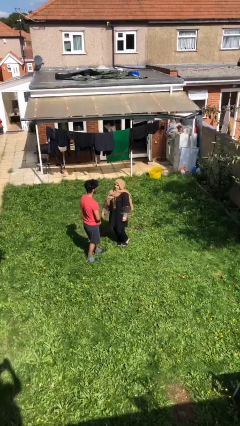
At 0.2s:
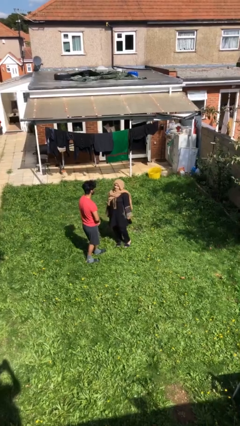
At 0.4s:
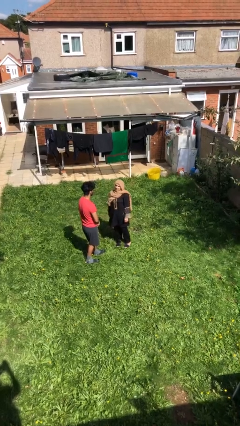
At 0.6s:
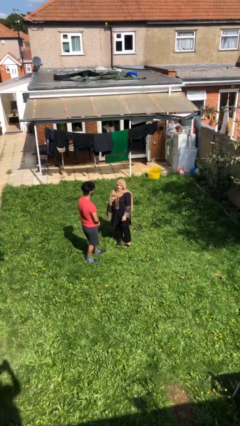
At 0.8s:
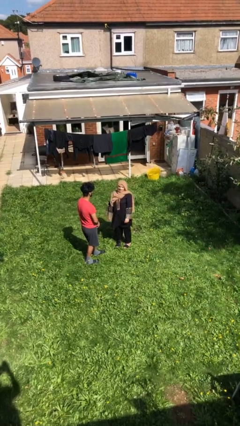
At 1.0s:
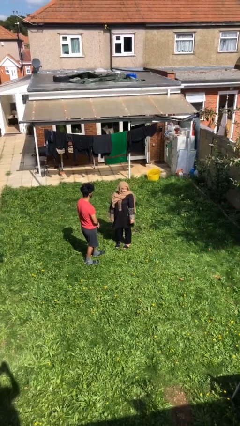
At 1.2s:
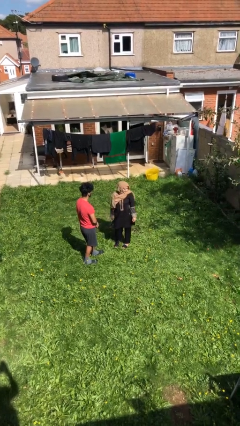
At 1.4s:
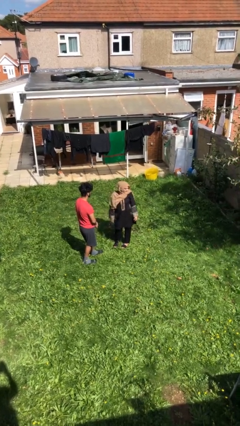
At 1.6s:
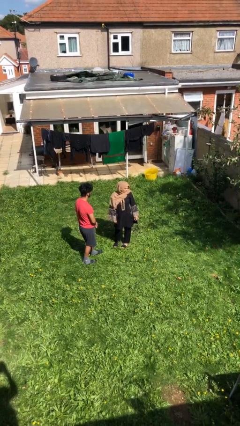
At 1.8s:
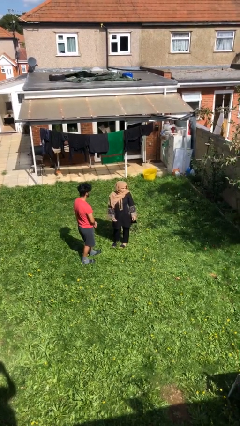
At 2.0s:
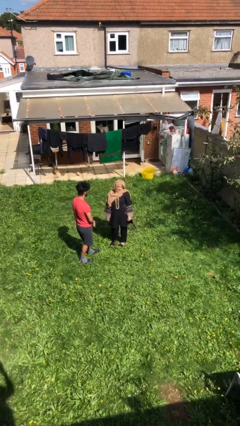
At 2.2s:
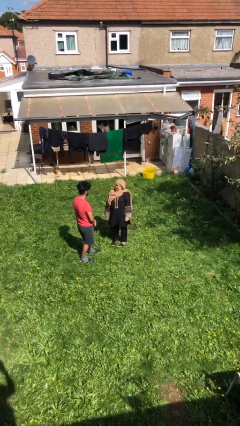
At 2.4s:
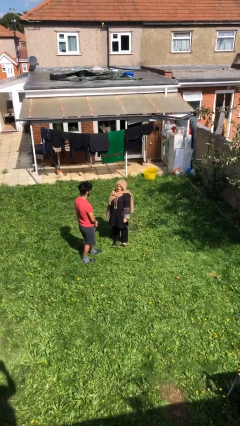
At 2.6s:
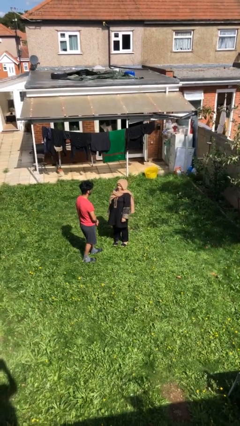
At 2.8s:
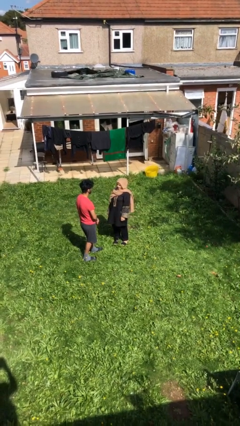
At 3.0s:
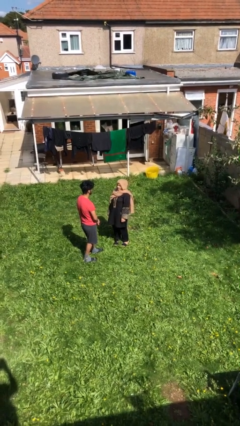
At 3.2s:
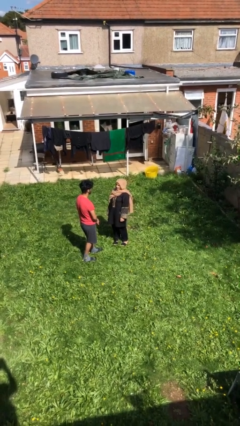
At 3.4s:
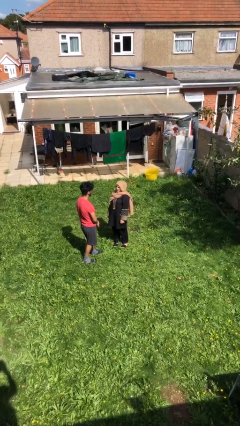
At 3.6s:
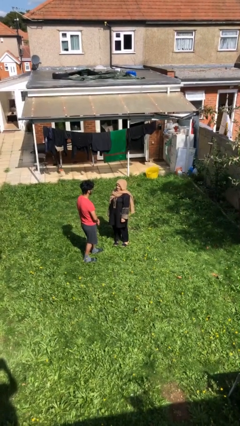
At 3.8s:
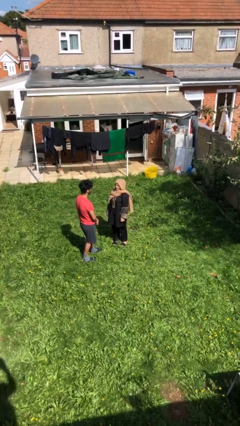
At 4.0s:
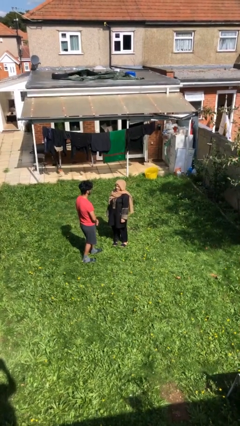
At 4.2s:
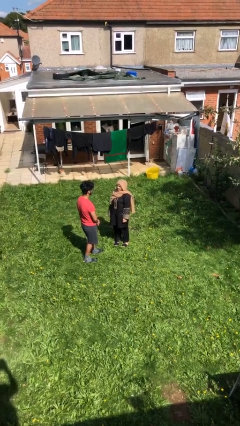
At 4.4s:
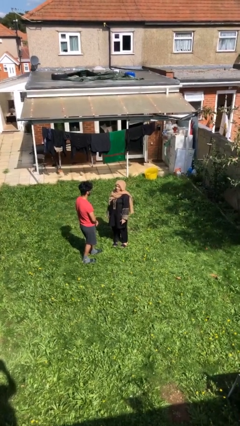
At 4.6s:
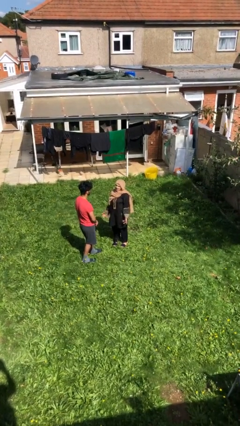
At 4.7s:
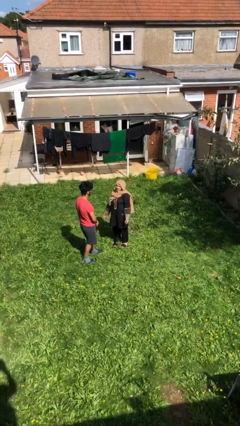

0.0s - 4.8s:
person talks to person

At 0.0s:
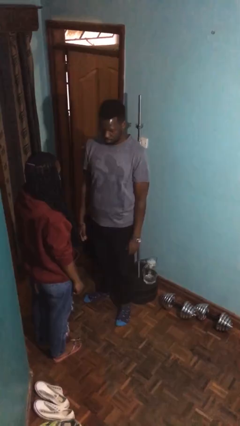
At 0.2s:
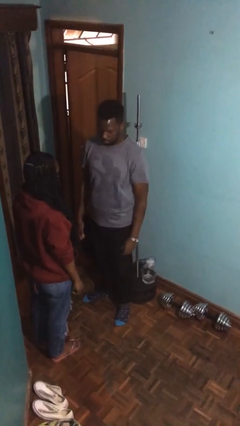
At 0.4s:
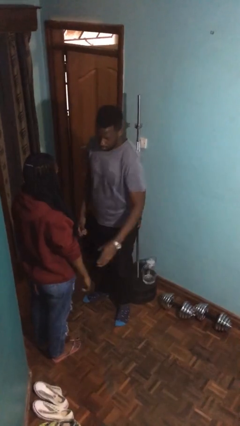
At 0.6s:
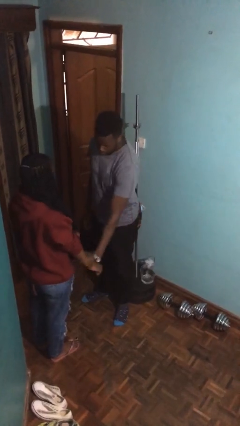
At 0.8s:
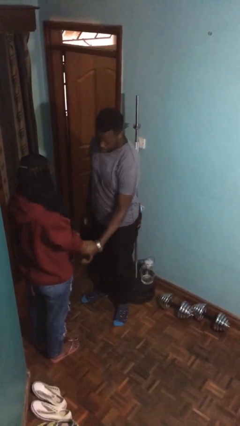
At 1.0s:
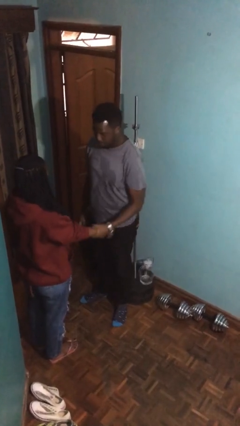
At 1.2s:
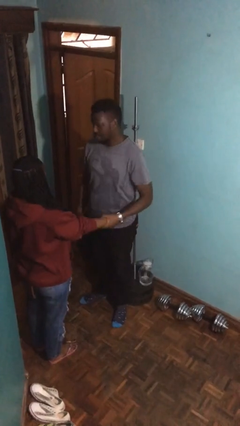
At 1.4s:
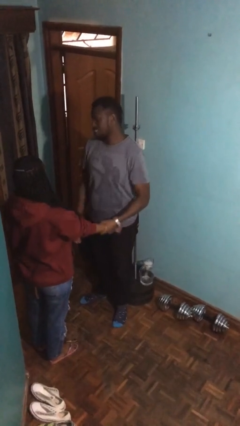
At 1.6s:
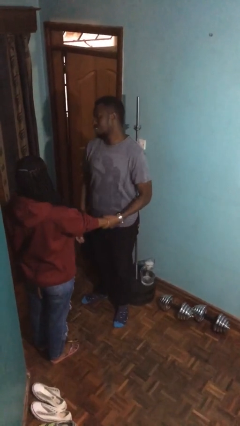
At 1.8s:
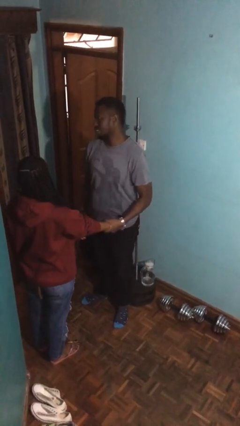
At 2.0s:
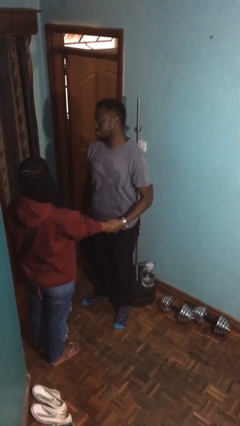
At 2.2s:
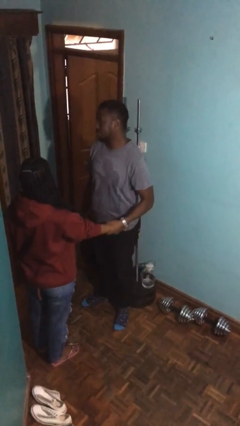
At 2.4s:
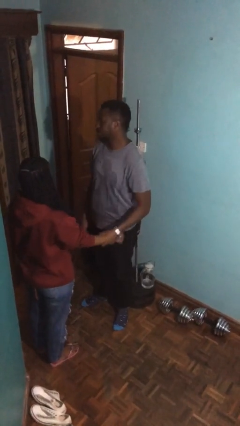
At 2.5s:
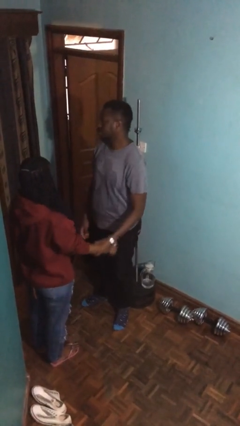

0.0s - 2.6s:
person grabs person by forearm

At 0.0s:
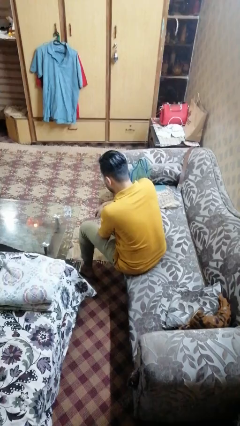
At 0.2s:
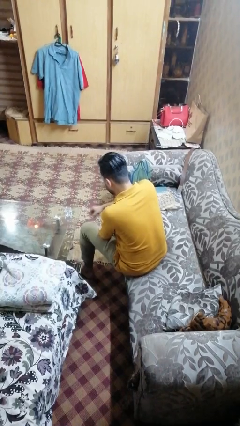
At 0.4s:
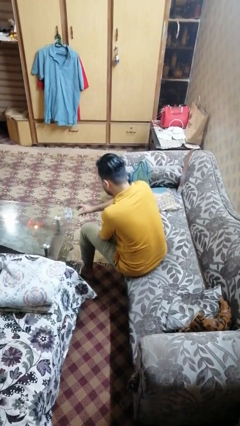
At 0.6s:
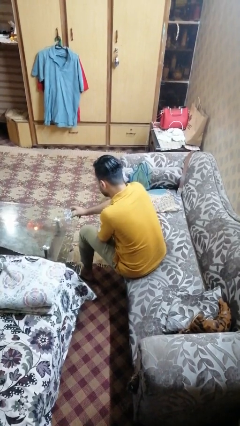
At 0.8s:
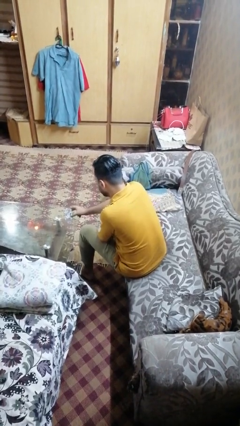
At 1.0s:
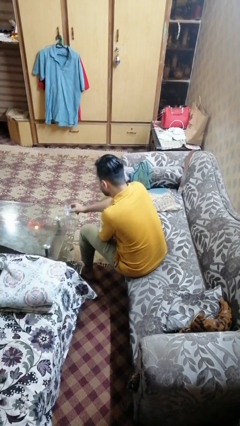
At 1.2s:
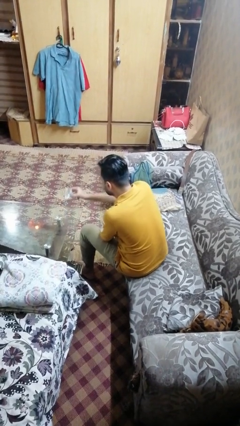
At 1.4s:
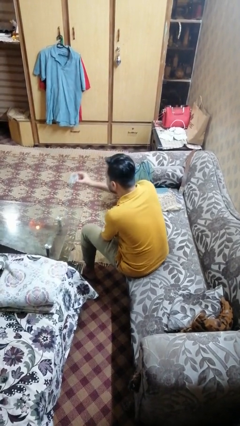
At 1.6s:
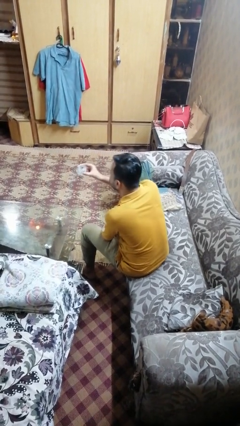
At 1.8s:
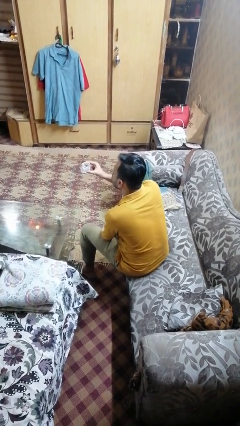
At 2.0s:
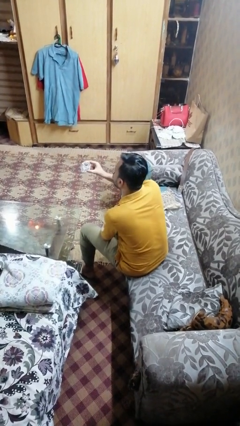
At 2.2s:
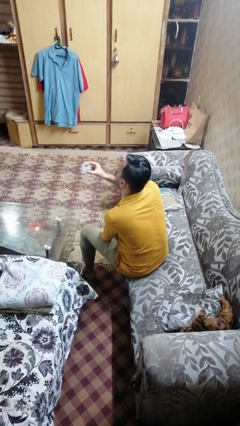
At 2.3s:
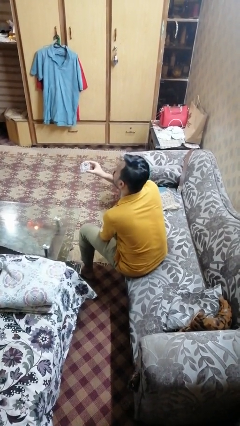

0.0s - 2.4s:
person picks up object from table

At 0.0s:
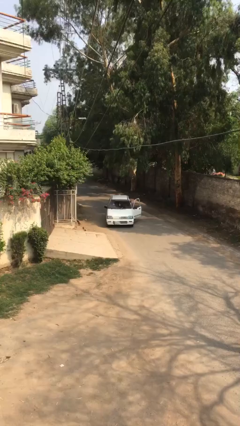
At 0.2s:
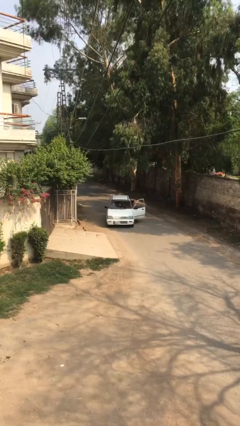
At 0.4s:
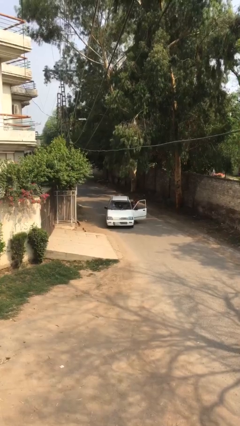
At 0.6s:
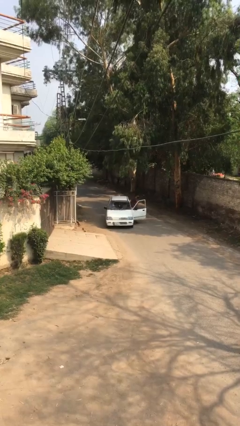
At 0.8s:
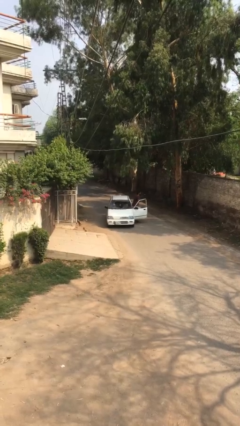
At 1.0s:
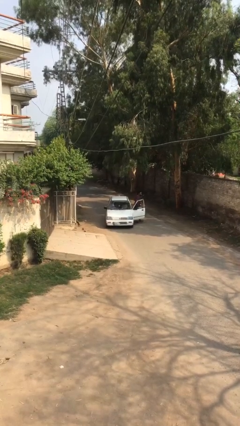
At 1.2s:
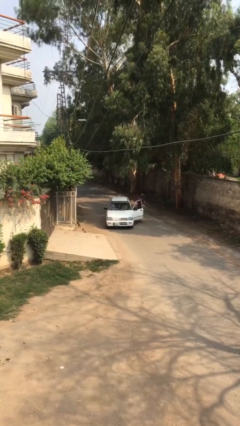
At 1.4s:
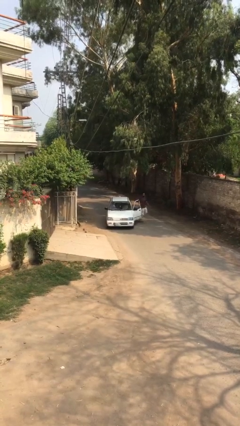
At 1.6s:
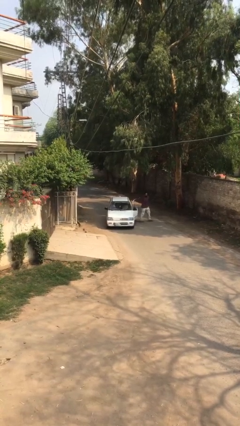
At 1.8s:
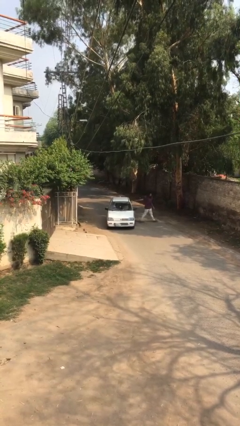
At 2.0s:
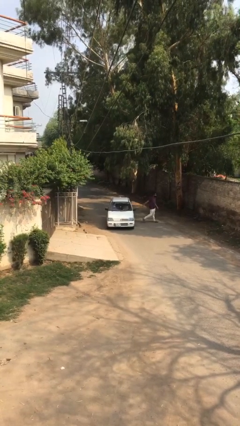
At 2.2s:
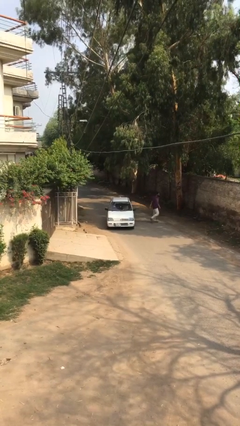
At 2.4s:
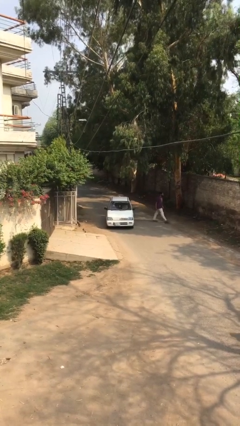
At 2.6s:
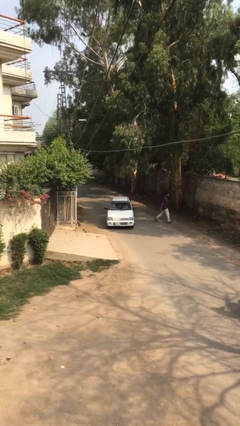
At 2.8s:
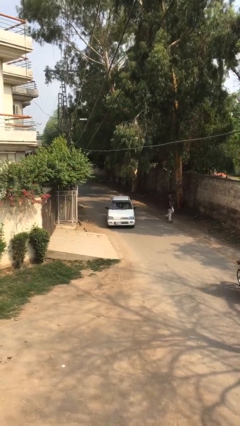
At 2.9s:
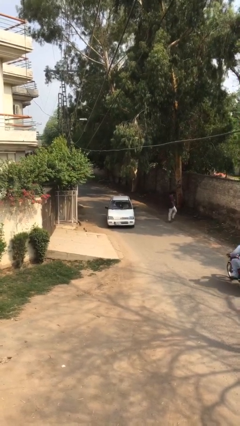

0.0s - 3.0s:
car drops off person

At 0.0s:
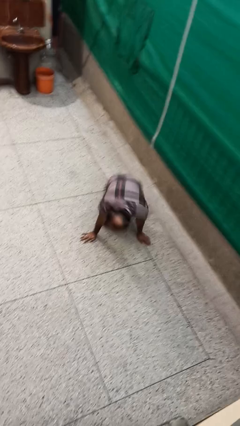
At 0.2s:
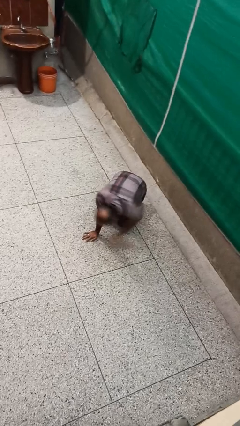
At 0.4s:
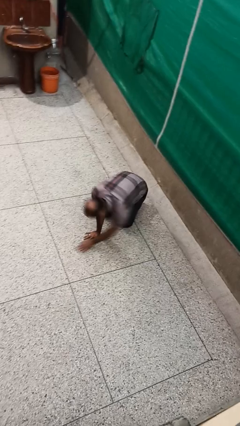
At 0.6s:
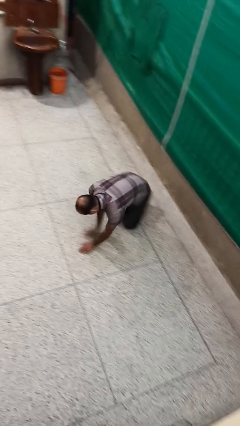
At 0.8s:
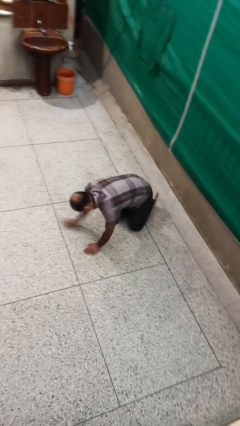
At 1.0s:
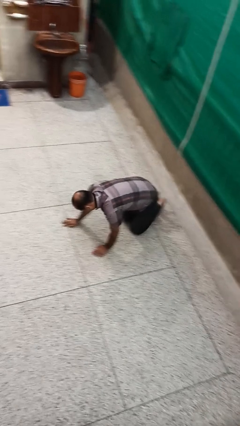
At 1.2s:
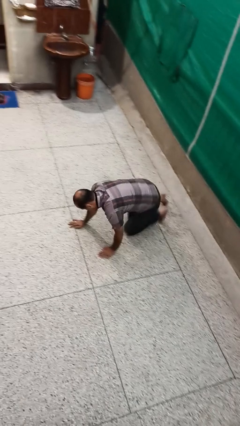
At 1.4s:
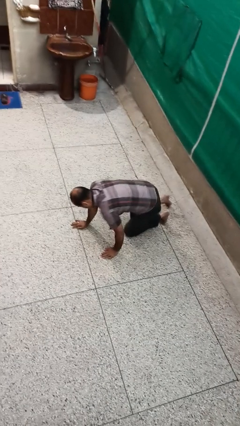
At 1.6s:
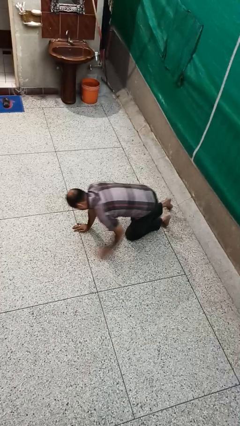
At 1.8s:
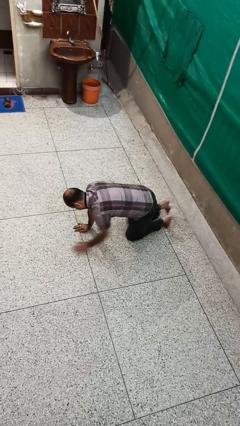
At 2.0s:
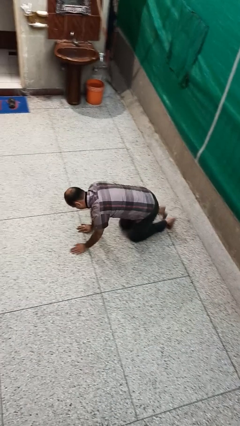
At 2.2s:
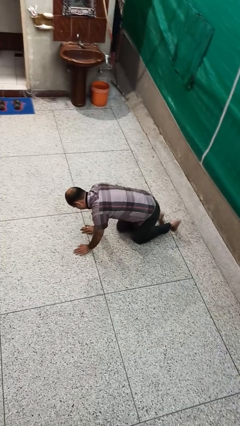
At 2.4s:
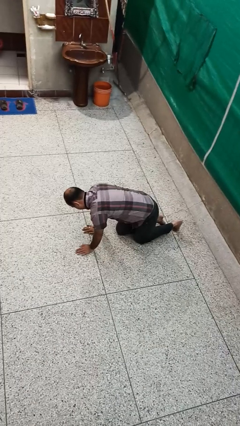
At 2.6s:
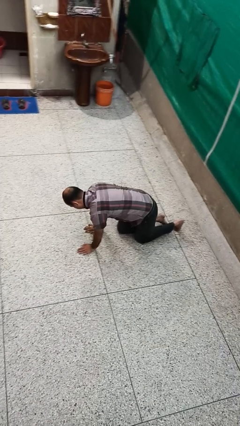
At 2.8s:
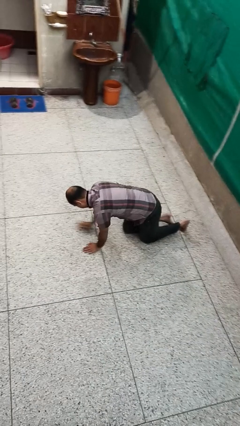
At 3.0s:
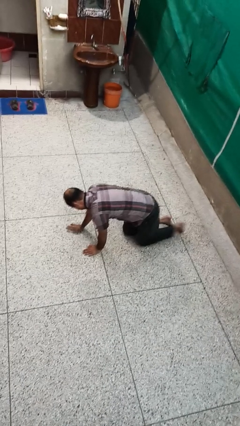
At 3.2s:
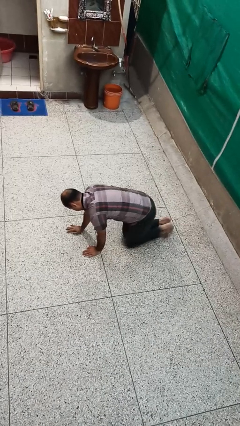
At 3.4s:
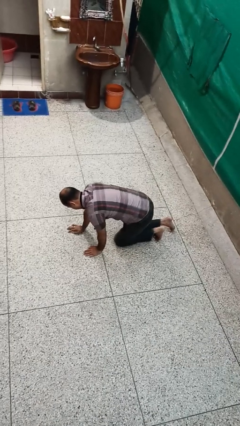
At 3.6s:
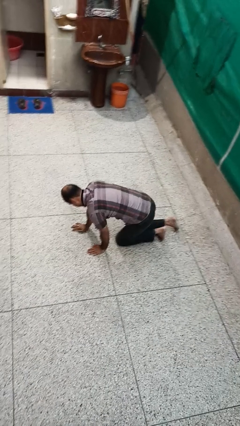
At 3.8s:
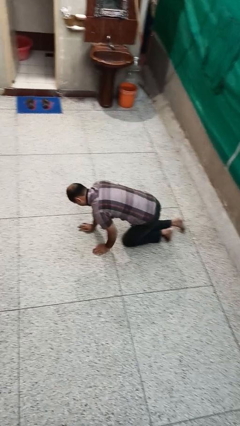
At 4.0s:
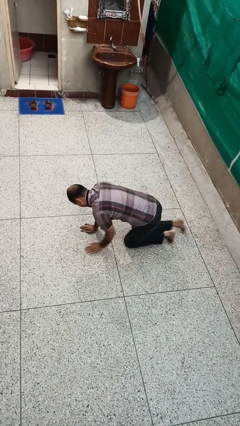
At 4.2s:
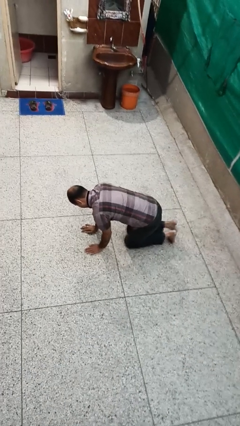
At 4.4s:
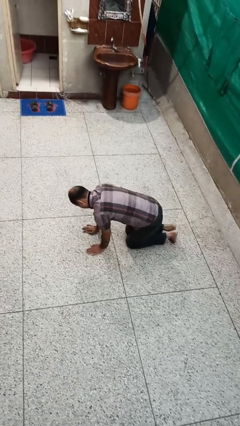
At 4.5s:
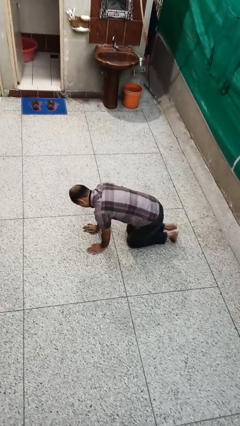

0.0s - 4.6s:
person crawls

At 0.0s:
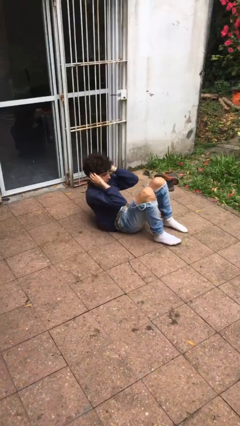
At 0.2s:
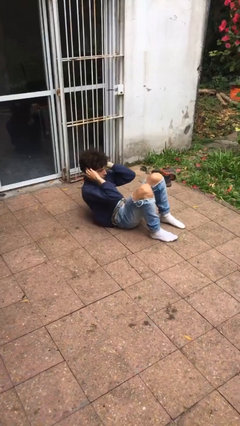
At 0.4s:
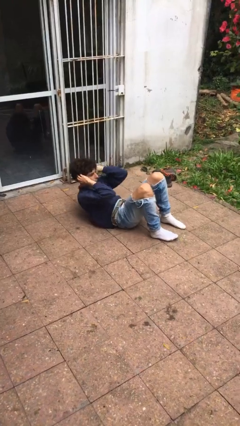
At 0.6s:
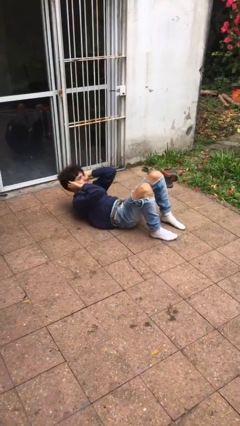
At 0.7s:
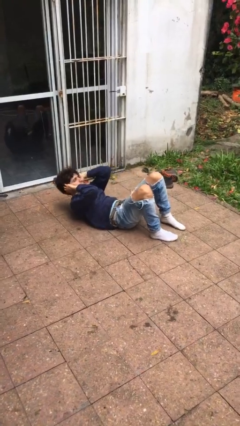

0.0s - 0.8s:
person exercises with situp
